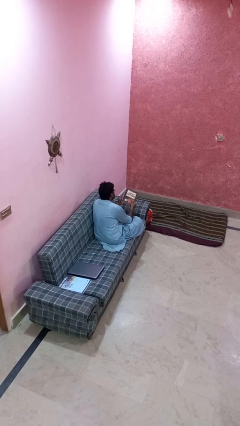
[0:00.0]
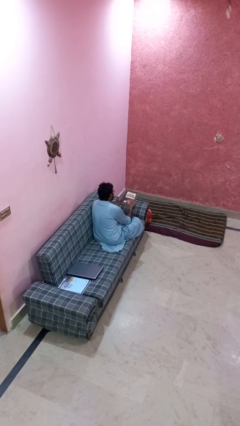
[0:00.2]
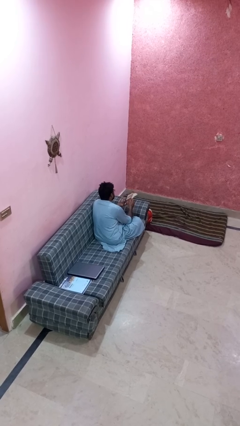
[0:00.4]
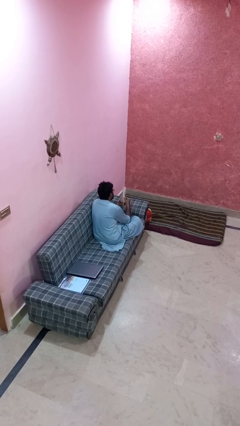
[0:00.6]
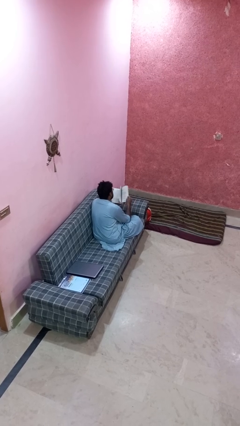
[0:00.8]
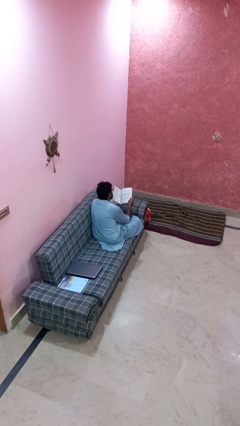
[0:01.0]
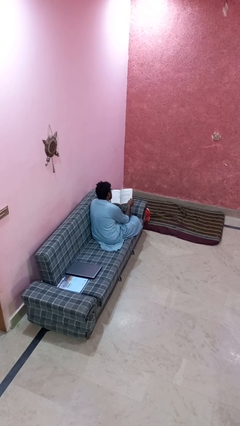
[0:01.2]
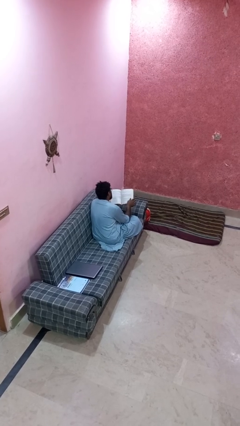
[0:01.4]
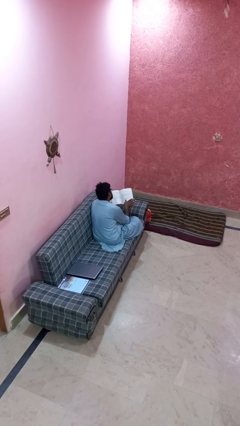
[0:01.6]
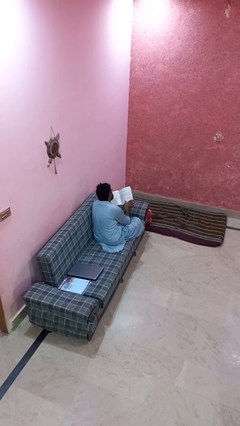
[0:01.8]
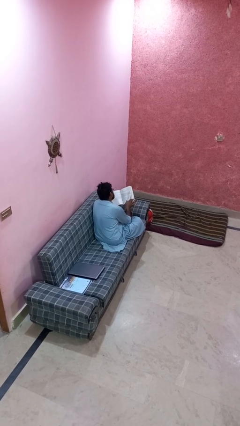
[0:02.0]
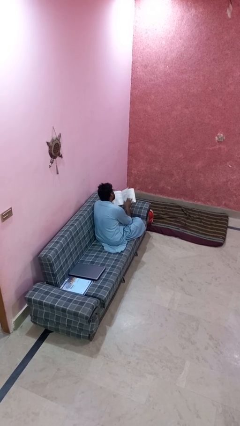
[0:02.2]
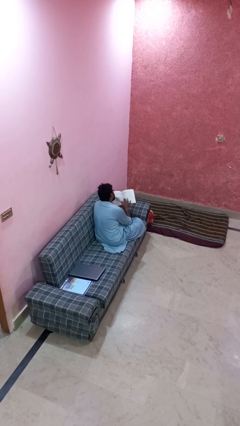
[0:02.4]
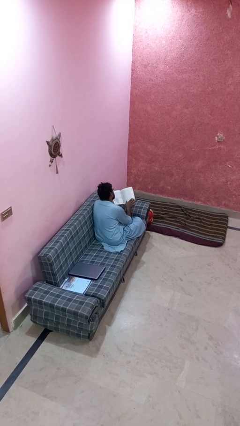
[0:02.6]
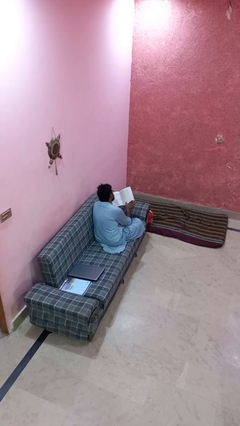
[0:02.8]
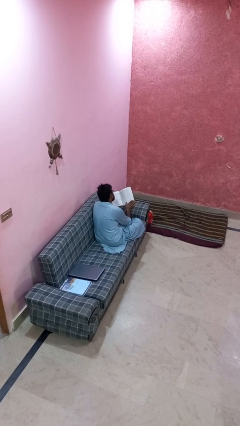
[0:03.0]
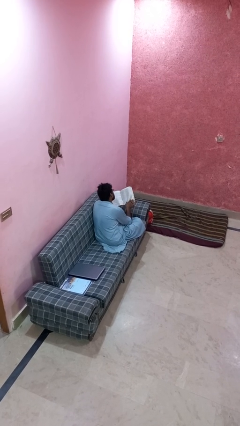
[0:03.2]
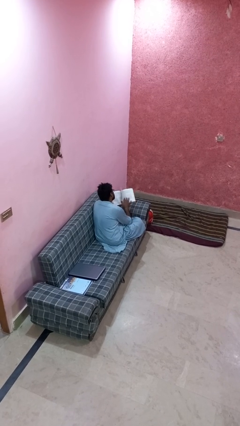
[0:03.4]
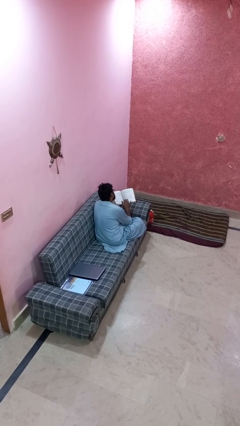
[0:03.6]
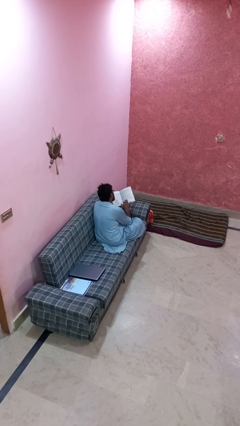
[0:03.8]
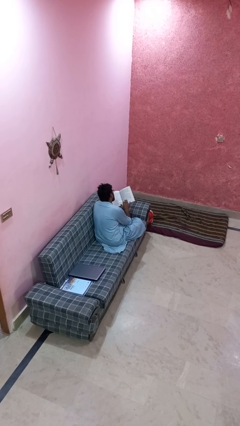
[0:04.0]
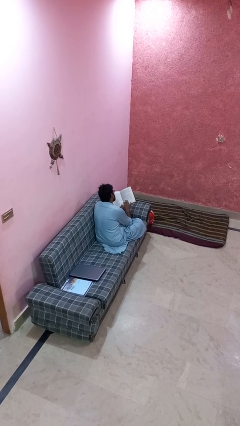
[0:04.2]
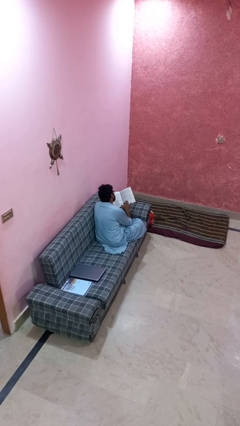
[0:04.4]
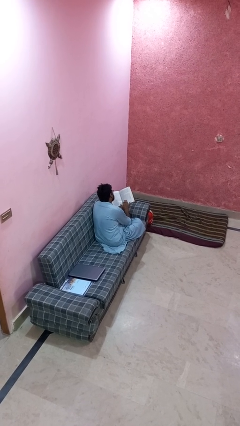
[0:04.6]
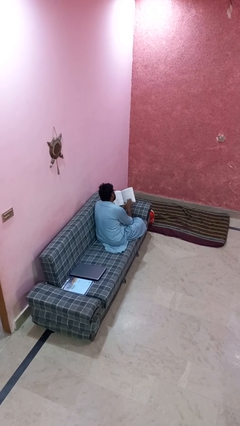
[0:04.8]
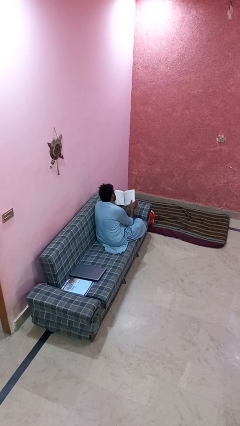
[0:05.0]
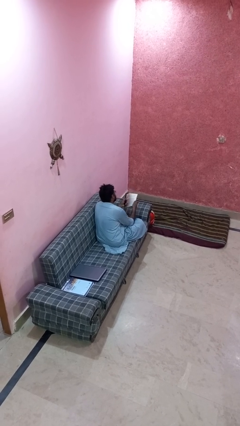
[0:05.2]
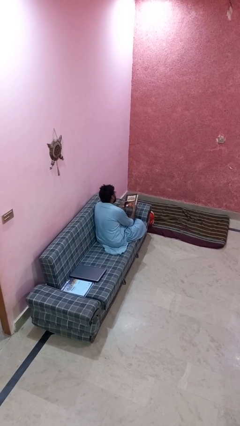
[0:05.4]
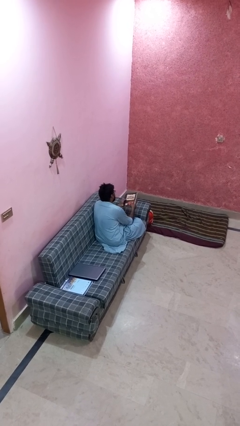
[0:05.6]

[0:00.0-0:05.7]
person reads book
